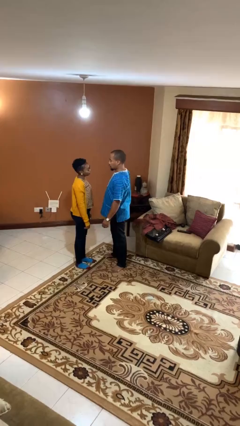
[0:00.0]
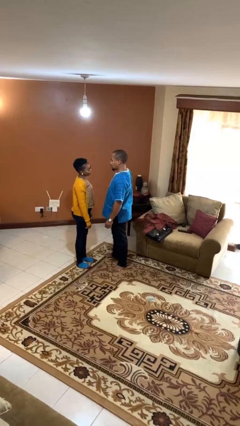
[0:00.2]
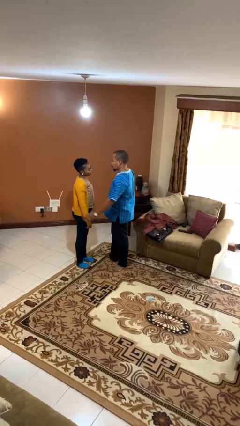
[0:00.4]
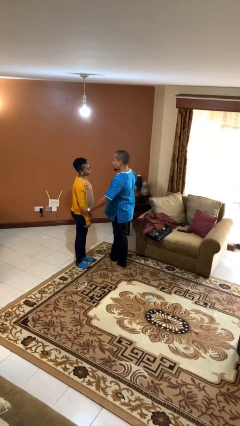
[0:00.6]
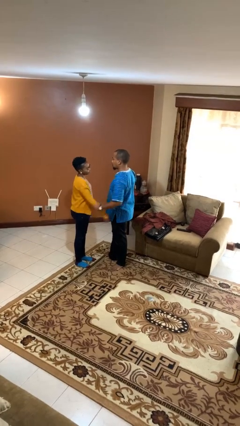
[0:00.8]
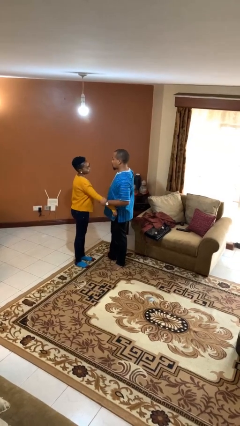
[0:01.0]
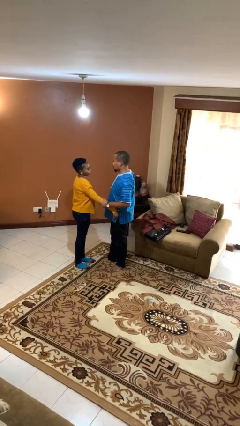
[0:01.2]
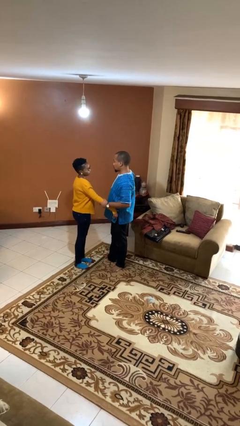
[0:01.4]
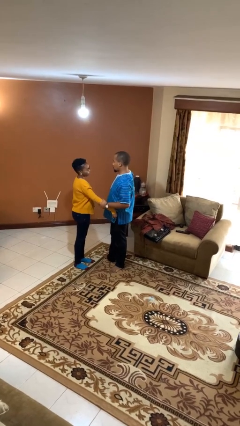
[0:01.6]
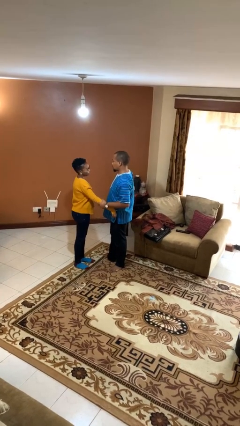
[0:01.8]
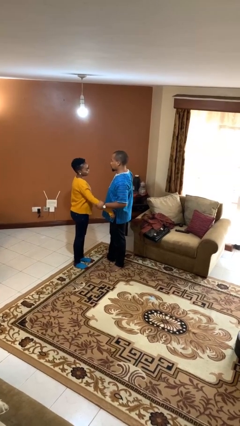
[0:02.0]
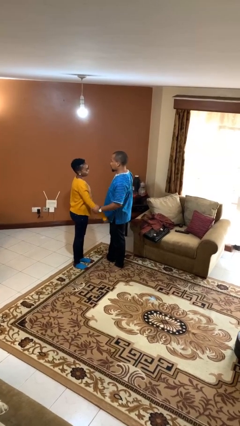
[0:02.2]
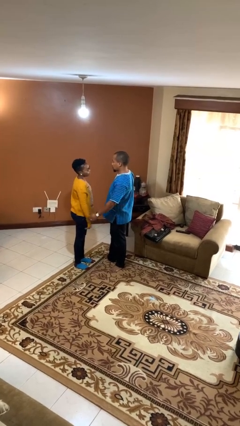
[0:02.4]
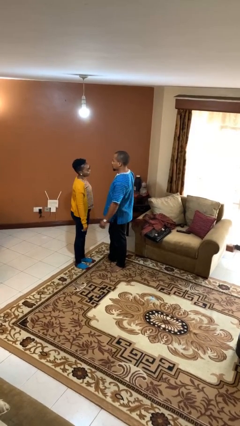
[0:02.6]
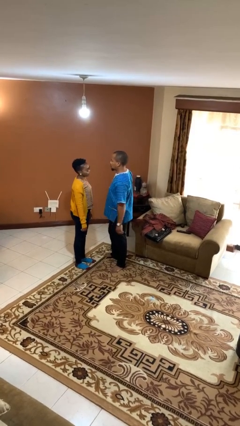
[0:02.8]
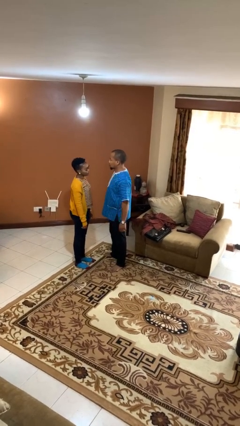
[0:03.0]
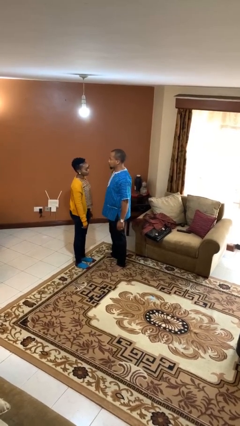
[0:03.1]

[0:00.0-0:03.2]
person grabs person by forearm

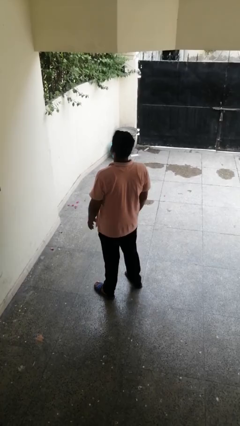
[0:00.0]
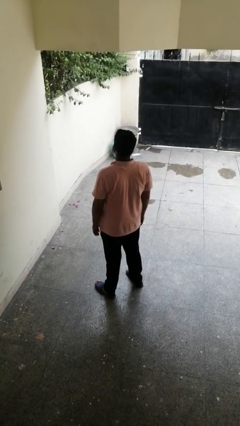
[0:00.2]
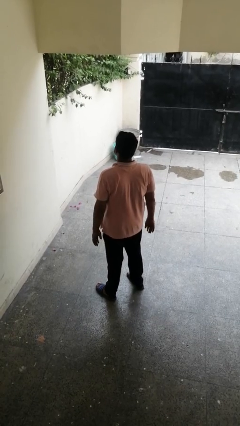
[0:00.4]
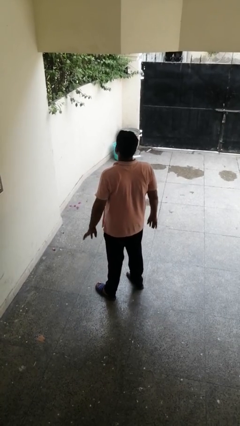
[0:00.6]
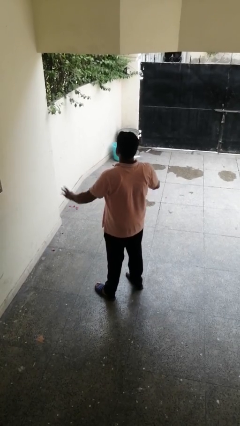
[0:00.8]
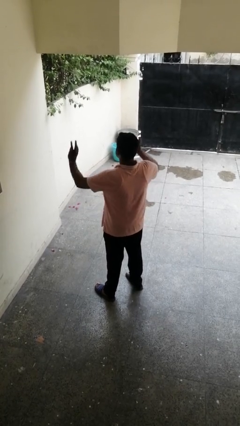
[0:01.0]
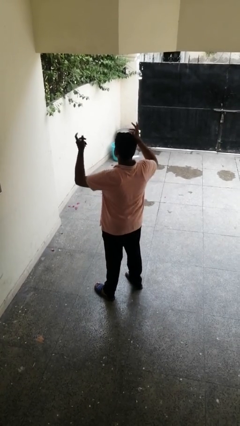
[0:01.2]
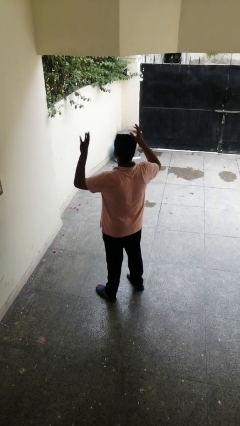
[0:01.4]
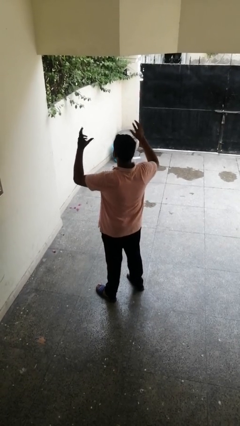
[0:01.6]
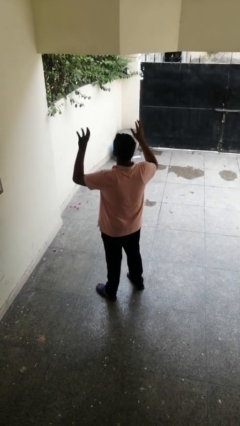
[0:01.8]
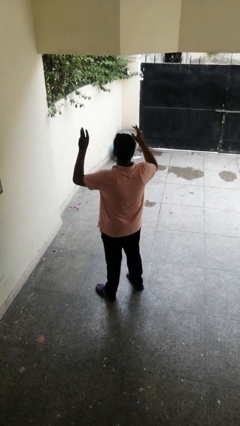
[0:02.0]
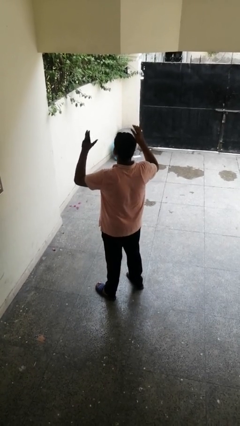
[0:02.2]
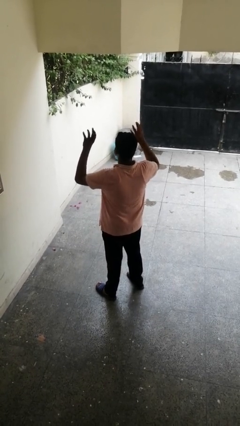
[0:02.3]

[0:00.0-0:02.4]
person dances in place

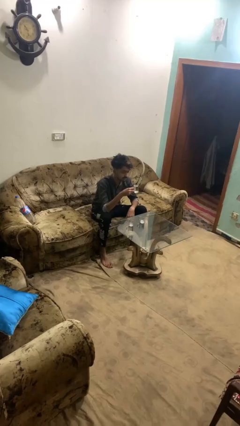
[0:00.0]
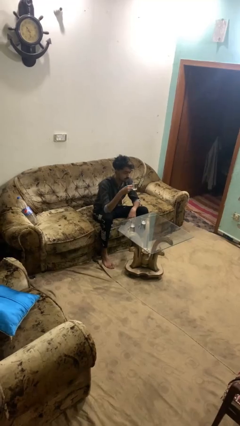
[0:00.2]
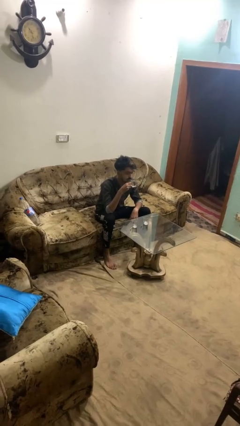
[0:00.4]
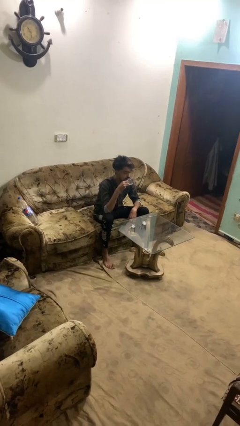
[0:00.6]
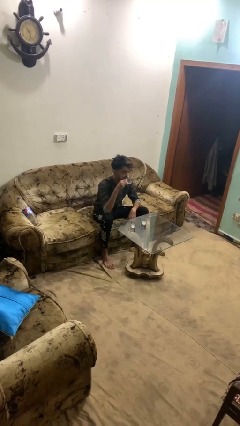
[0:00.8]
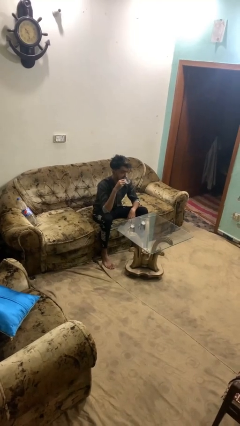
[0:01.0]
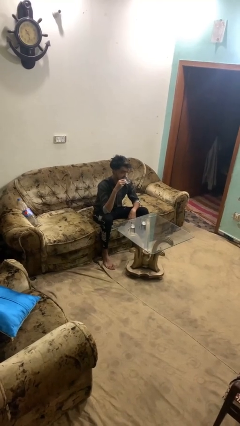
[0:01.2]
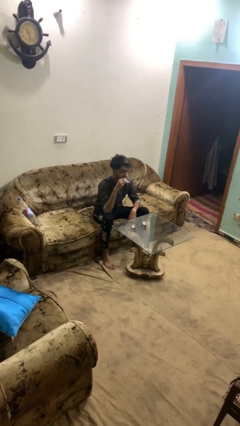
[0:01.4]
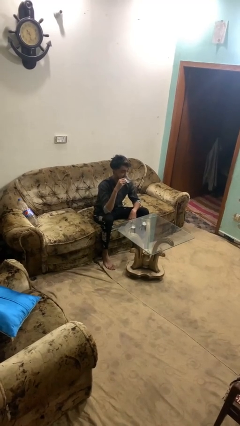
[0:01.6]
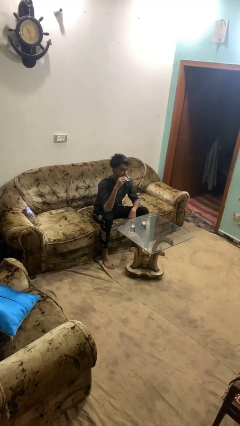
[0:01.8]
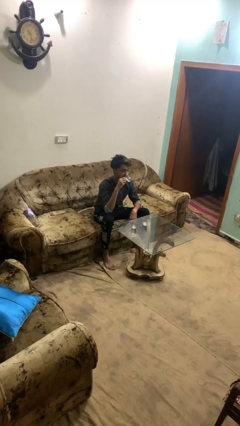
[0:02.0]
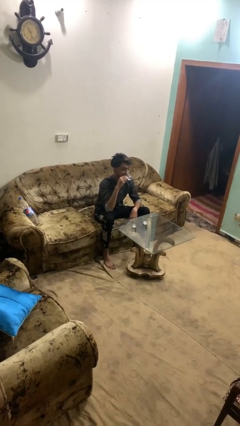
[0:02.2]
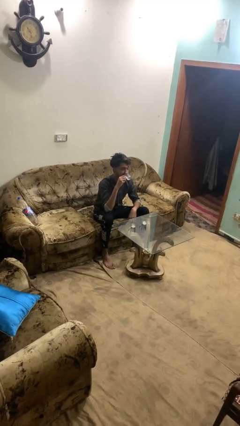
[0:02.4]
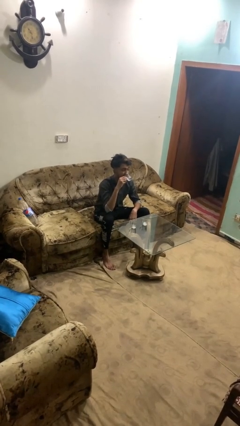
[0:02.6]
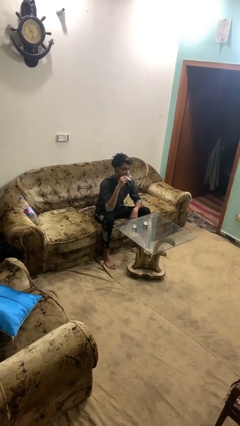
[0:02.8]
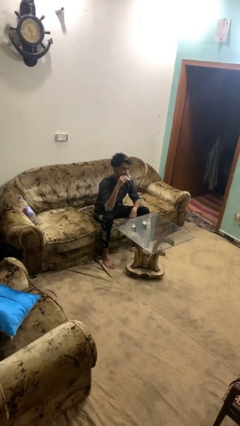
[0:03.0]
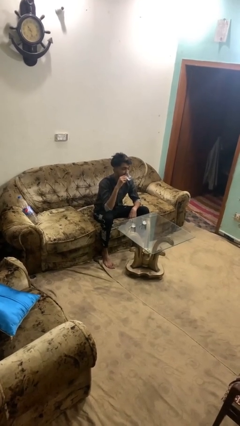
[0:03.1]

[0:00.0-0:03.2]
person drinks from shotglass

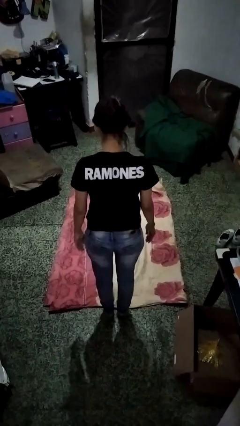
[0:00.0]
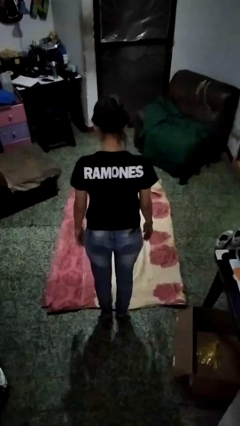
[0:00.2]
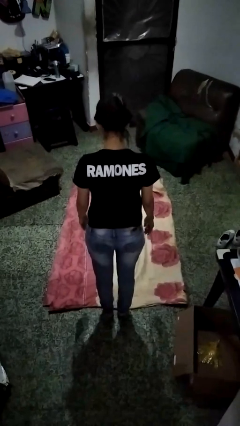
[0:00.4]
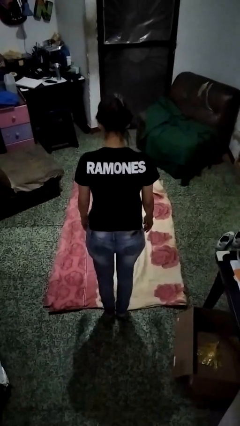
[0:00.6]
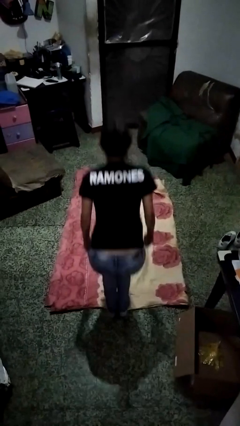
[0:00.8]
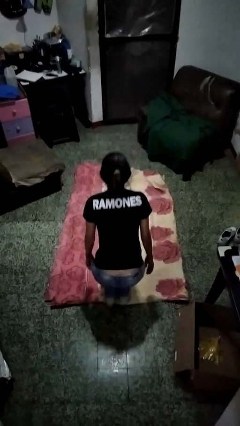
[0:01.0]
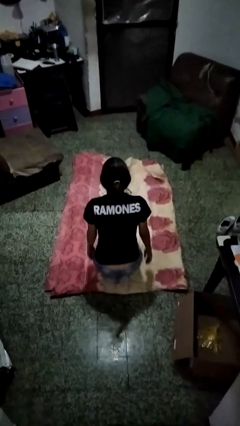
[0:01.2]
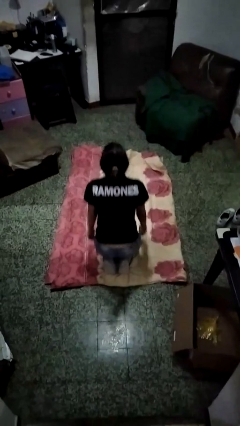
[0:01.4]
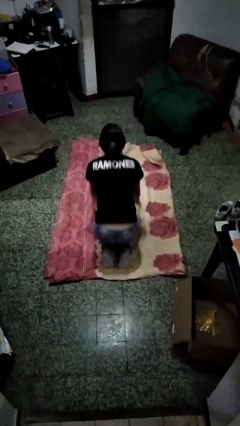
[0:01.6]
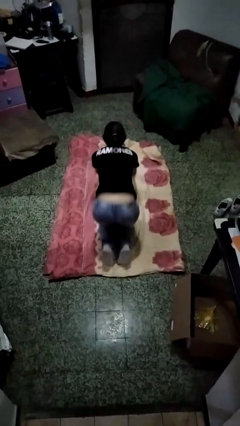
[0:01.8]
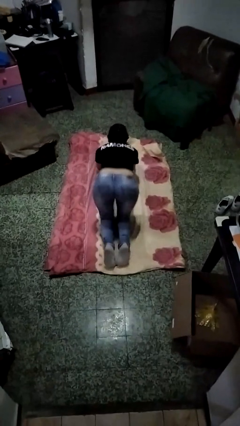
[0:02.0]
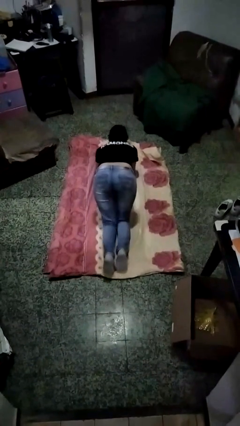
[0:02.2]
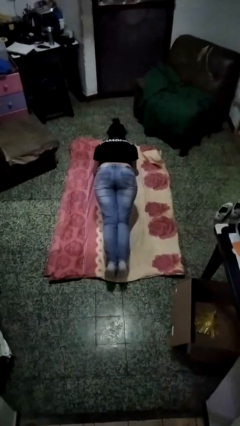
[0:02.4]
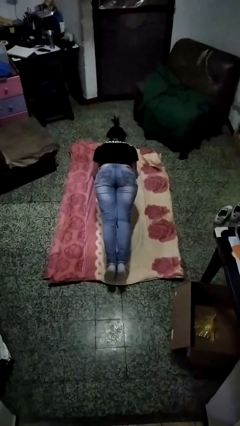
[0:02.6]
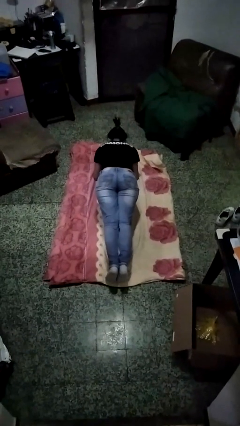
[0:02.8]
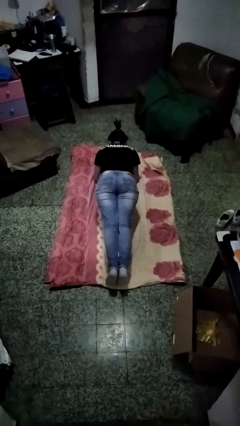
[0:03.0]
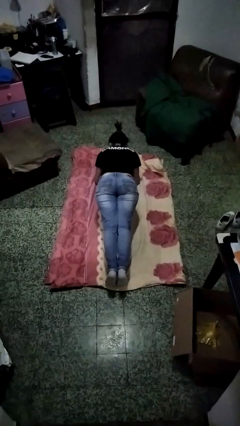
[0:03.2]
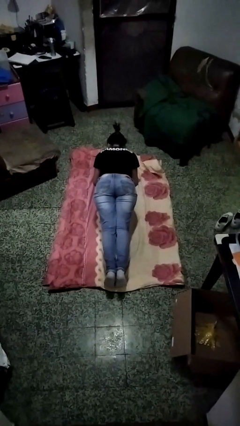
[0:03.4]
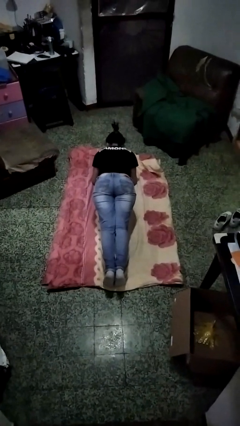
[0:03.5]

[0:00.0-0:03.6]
person exercises with plank

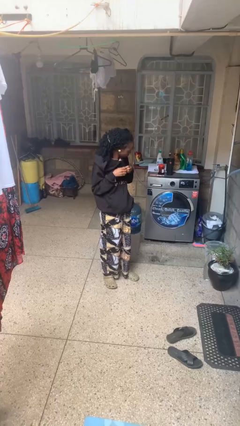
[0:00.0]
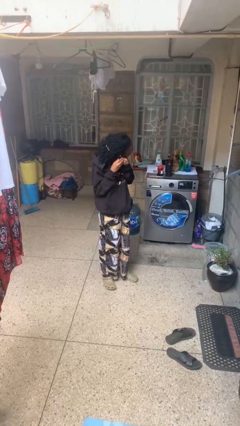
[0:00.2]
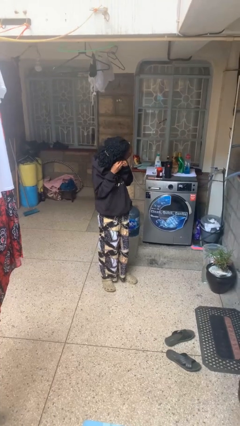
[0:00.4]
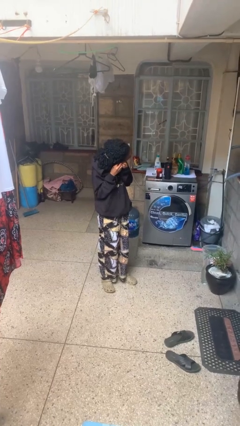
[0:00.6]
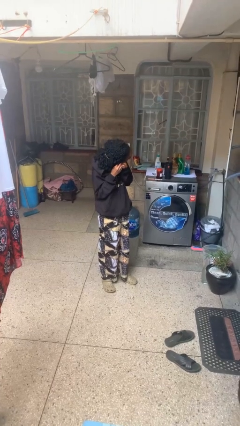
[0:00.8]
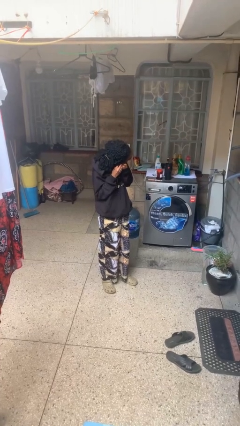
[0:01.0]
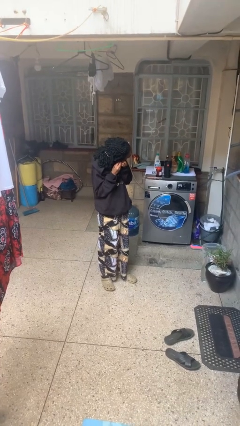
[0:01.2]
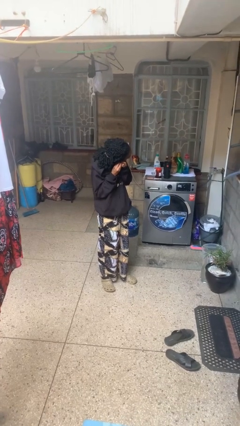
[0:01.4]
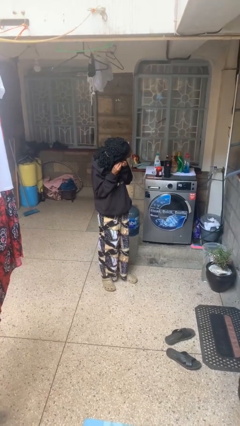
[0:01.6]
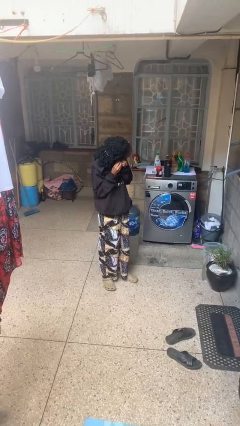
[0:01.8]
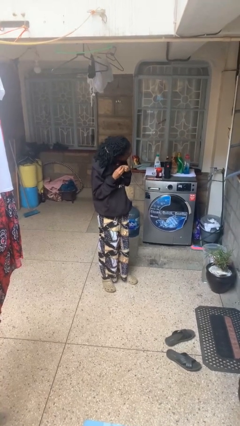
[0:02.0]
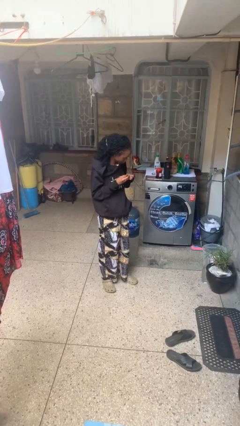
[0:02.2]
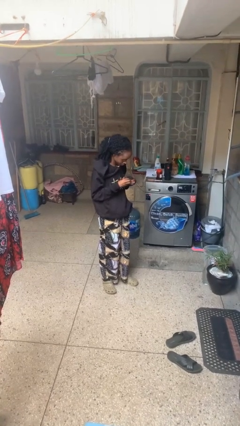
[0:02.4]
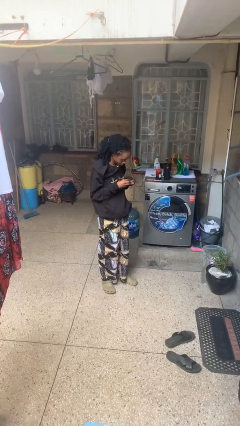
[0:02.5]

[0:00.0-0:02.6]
person takes off earrings

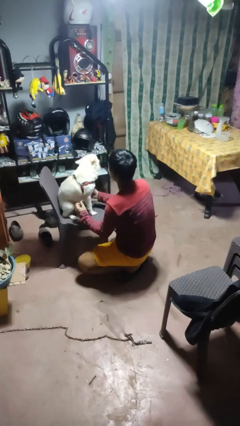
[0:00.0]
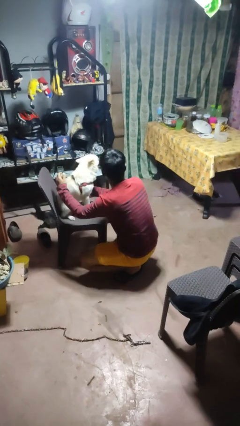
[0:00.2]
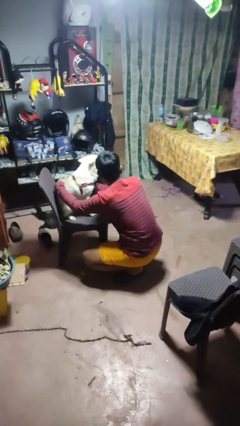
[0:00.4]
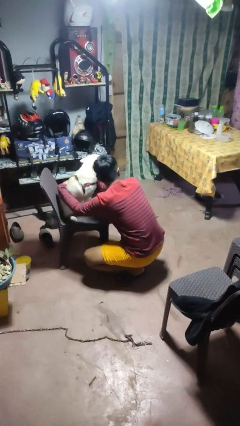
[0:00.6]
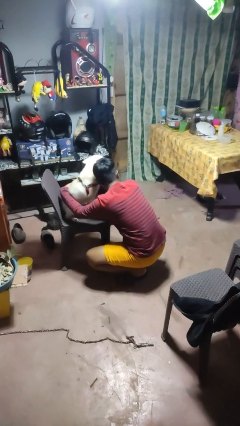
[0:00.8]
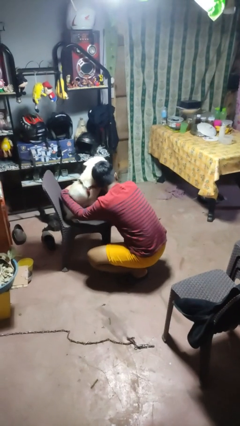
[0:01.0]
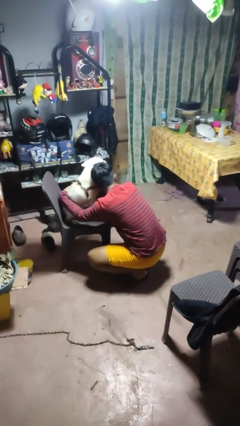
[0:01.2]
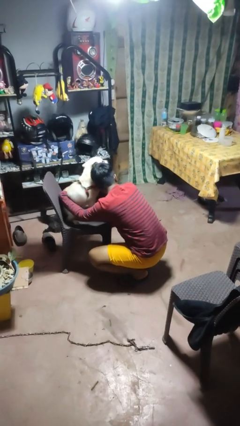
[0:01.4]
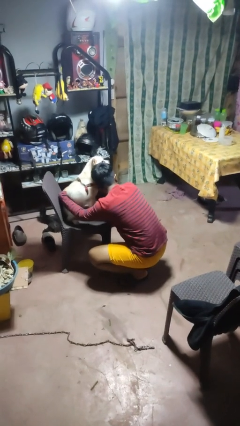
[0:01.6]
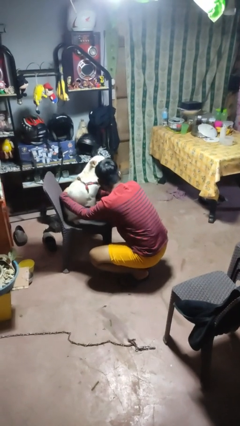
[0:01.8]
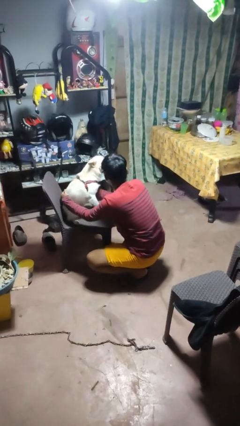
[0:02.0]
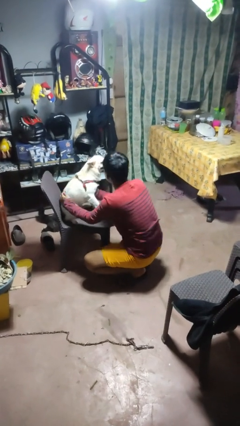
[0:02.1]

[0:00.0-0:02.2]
person hugs dog

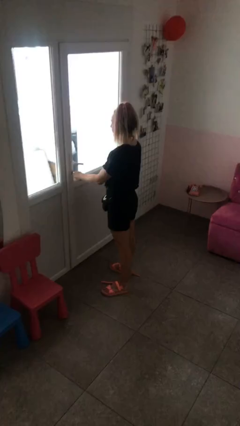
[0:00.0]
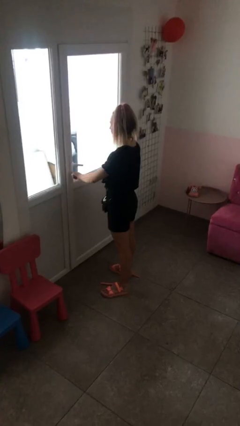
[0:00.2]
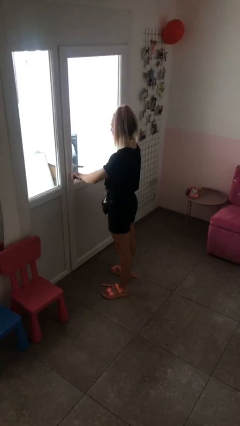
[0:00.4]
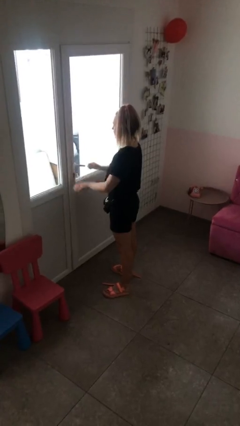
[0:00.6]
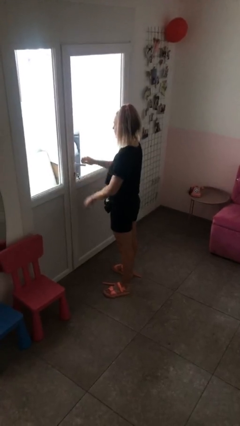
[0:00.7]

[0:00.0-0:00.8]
person unlocks door with keys
